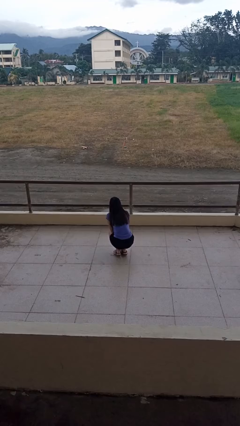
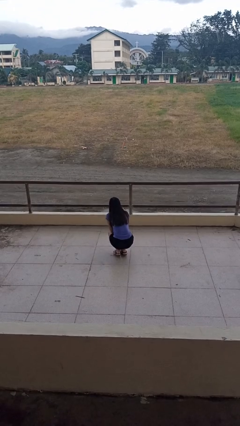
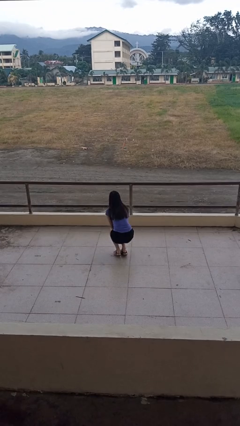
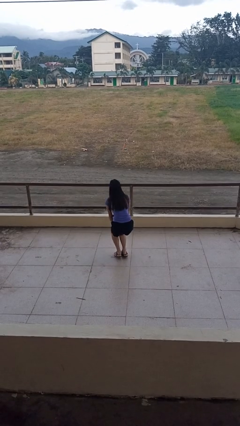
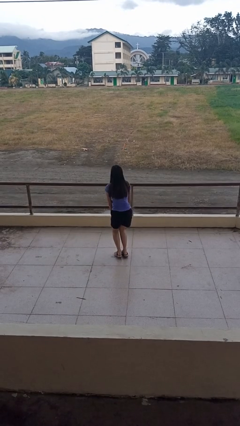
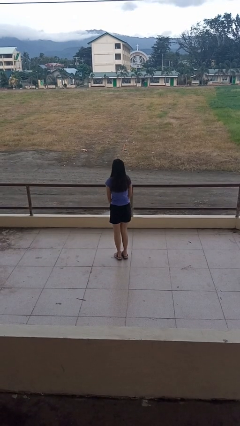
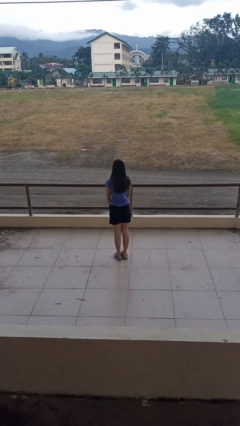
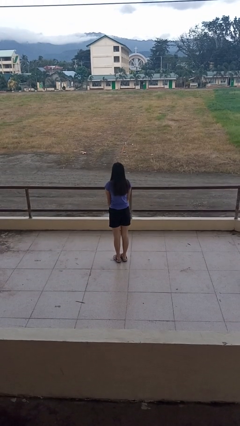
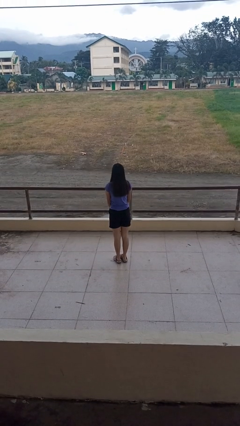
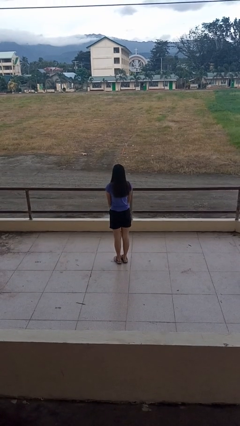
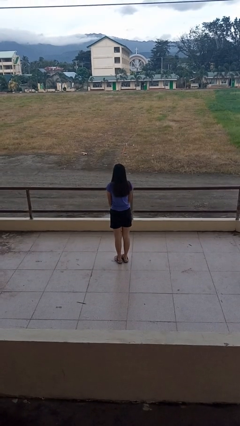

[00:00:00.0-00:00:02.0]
person stands up

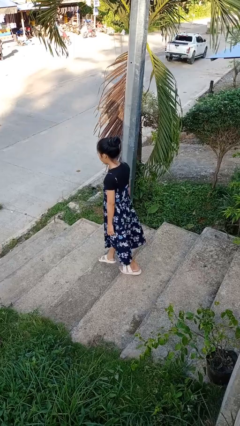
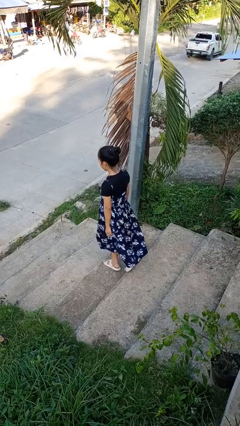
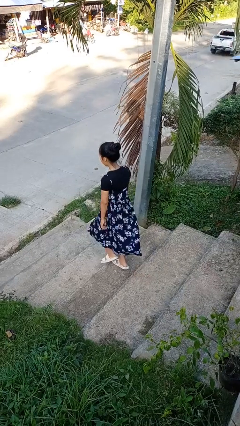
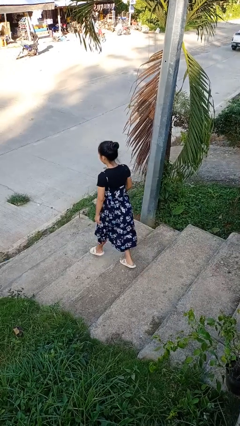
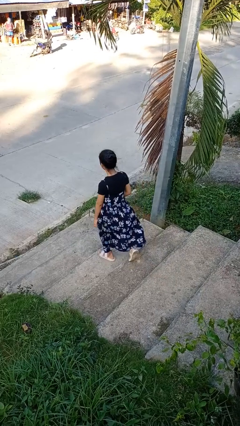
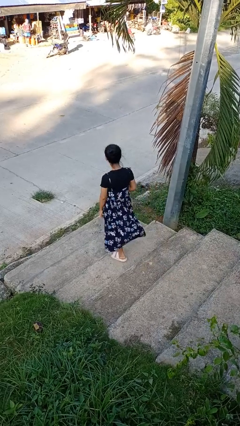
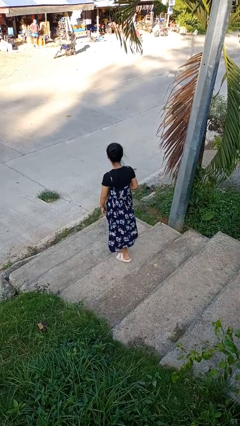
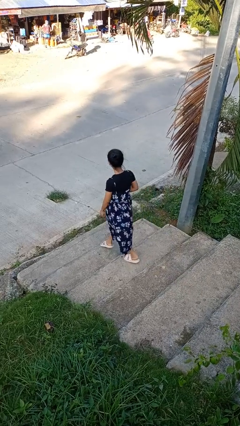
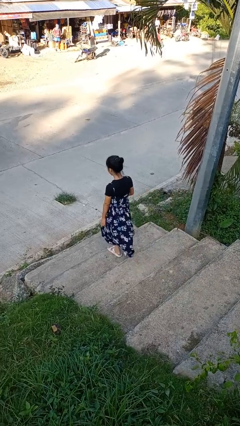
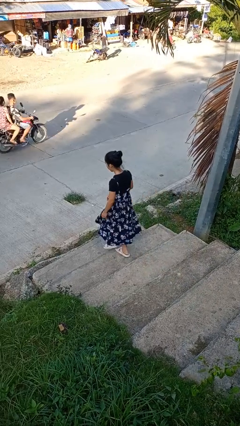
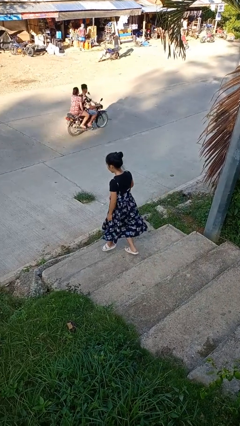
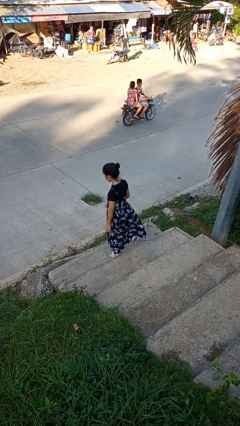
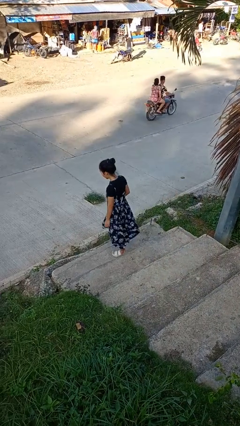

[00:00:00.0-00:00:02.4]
person climbs down stairs

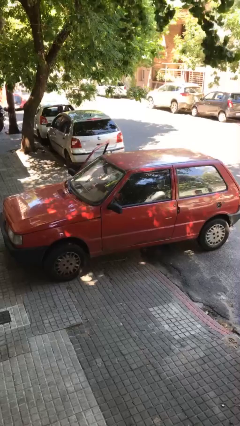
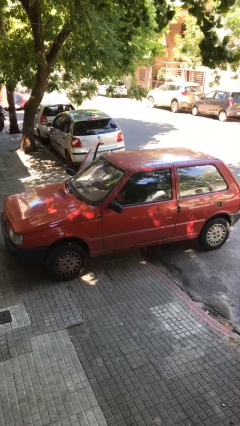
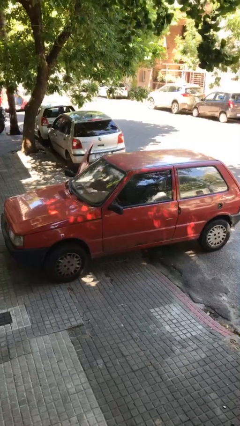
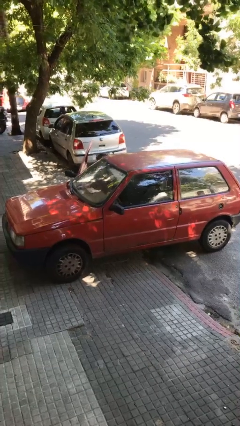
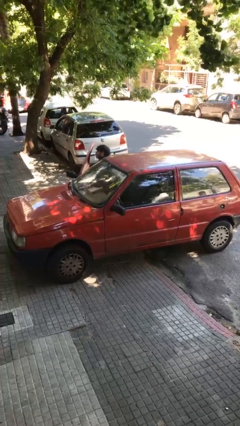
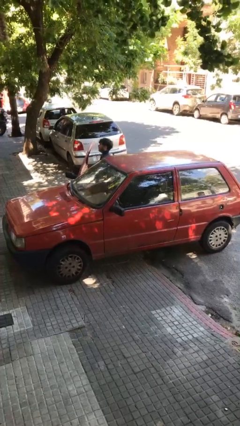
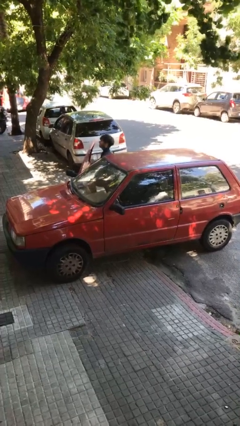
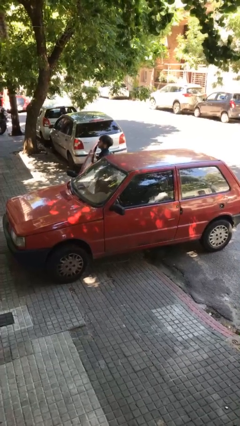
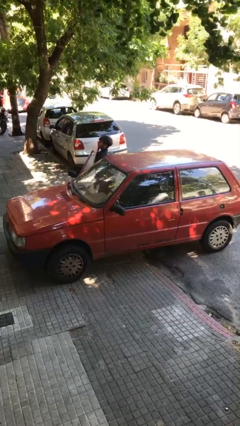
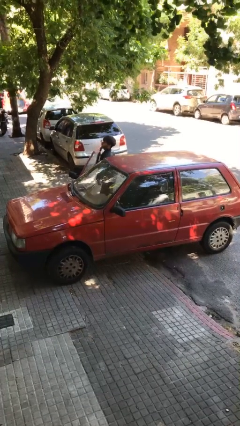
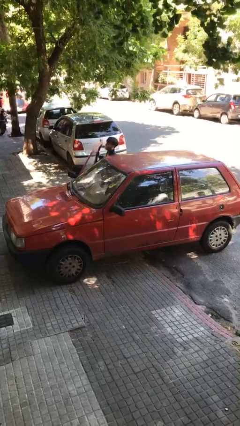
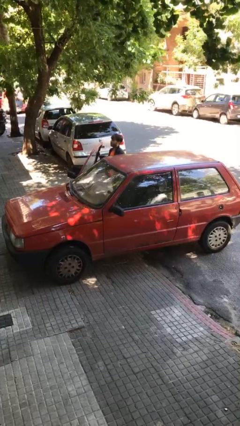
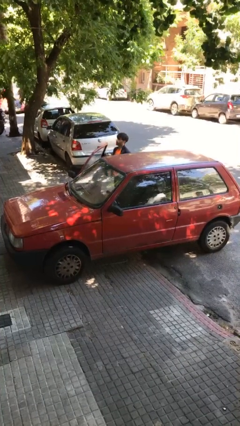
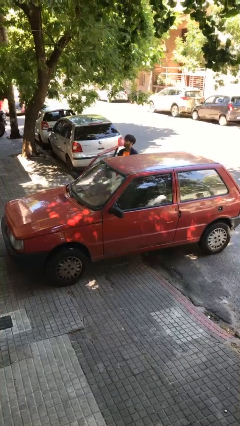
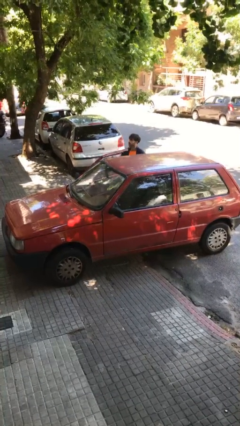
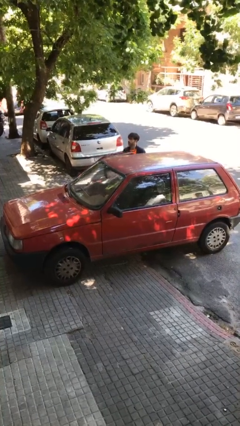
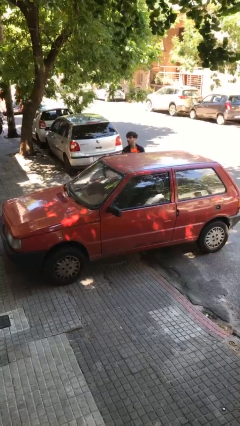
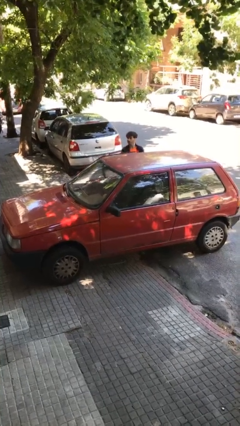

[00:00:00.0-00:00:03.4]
car drops off person

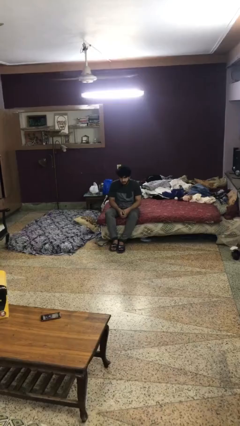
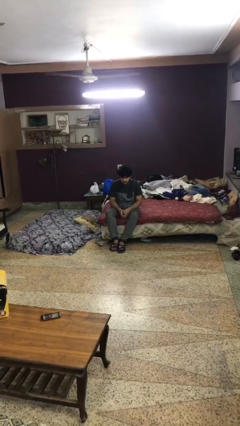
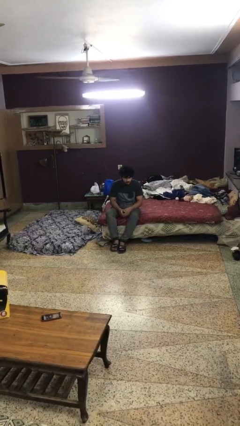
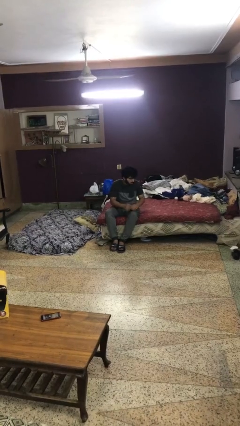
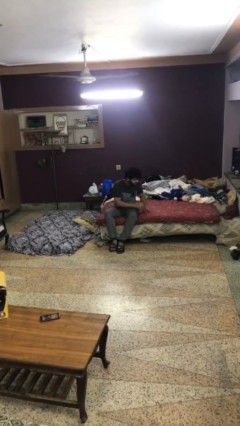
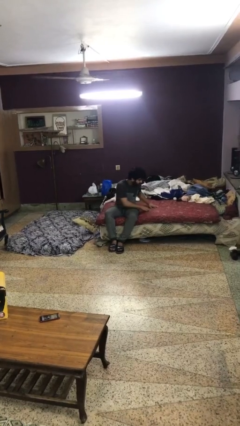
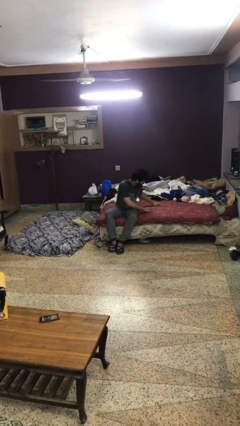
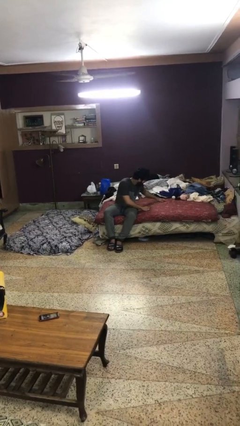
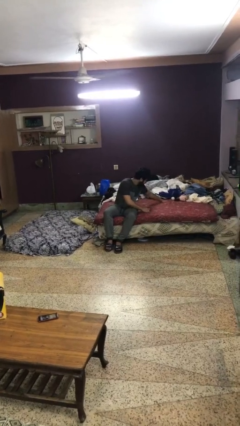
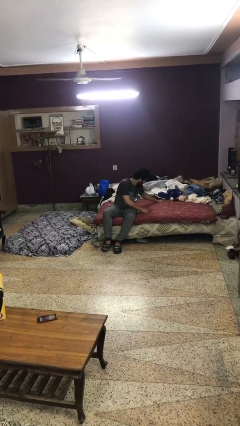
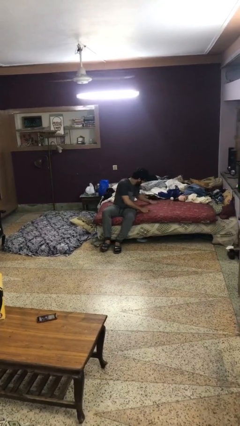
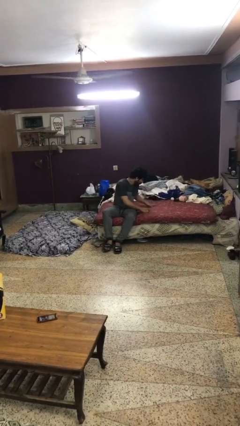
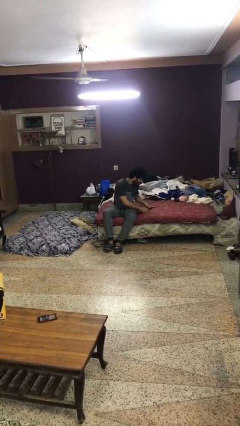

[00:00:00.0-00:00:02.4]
person searches under bed

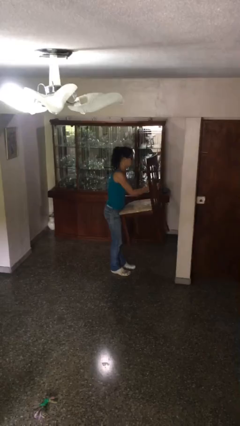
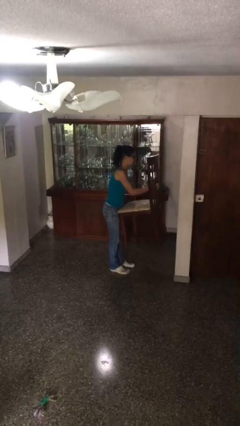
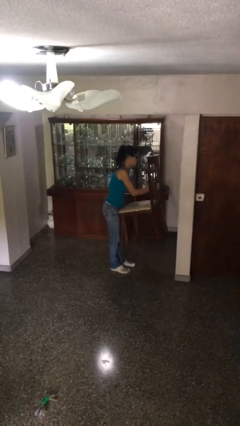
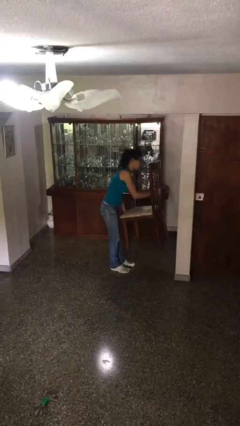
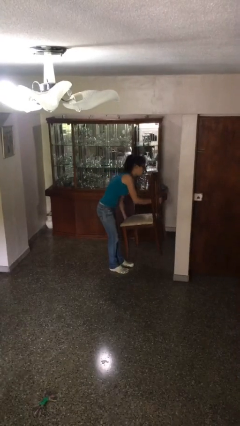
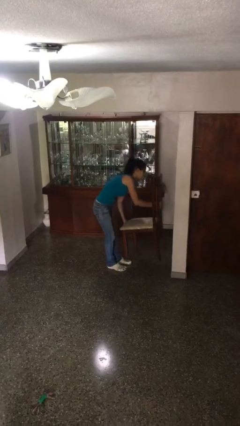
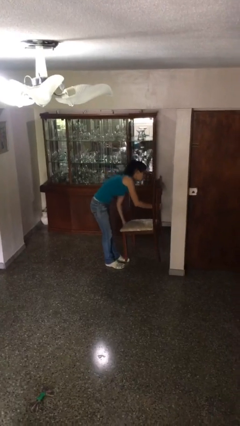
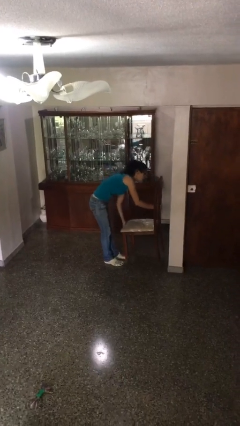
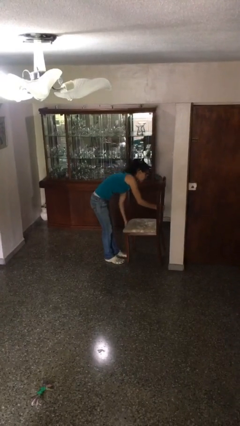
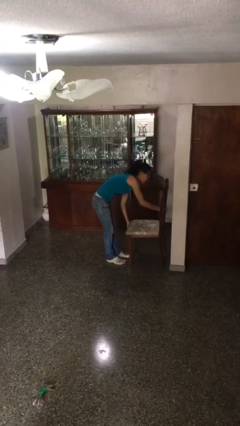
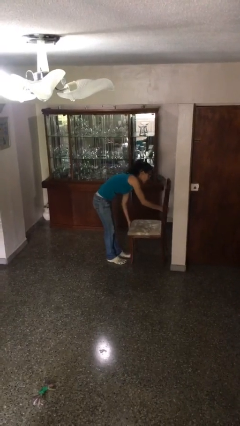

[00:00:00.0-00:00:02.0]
person puts down object on floor

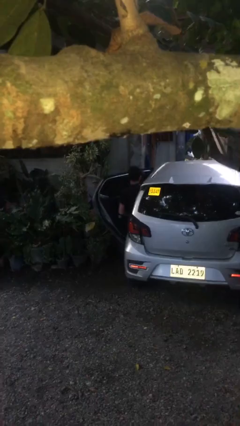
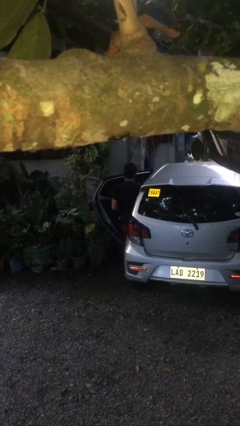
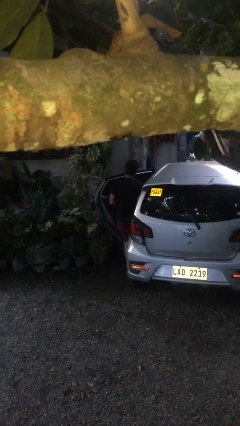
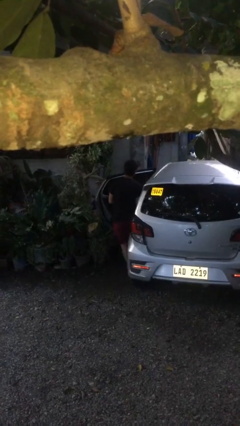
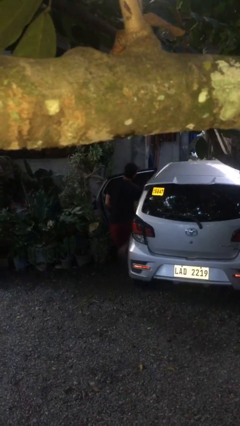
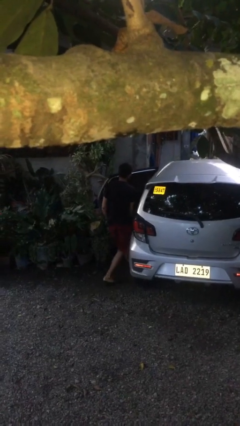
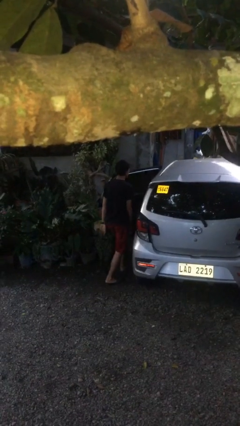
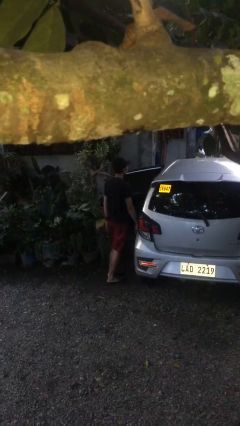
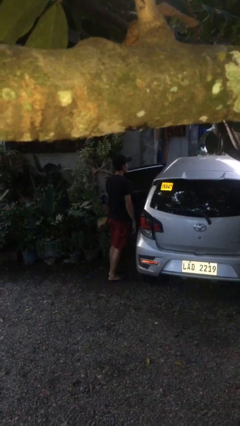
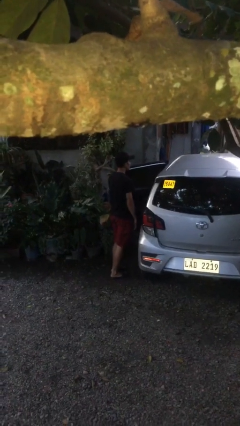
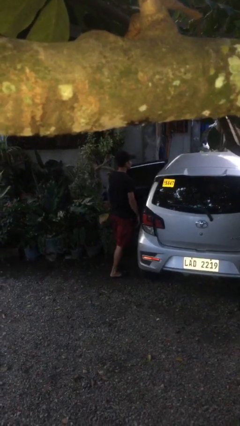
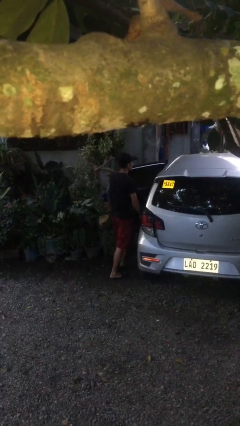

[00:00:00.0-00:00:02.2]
person exits car

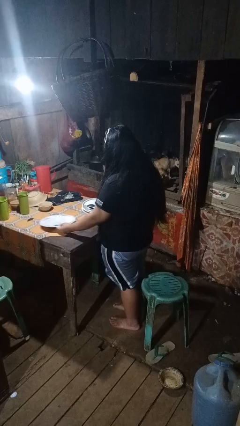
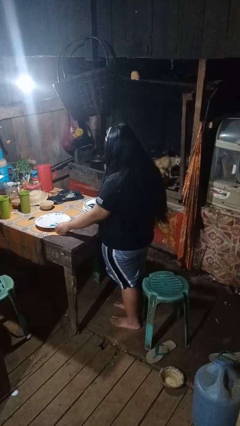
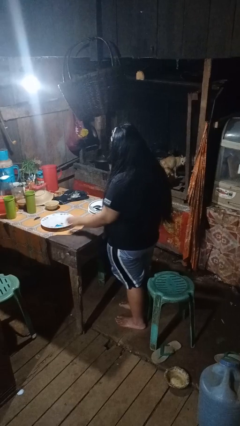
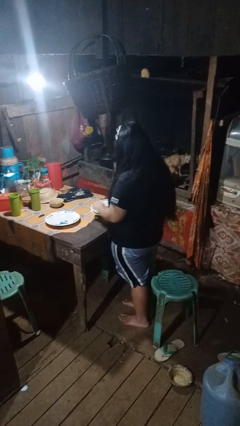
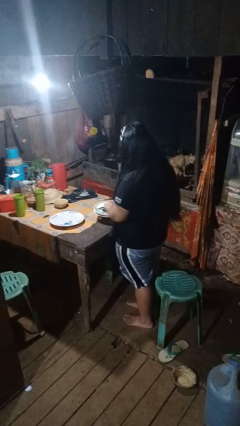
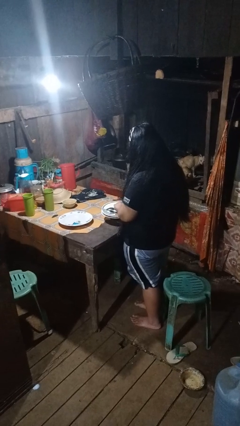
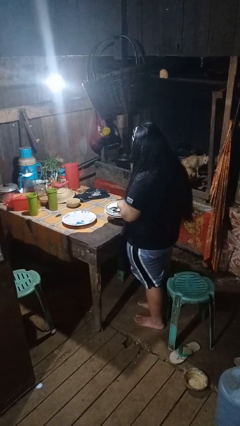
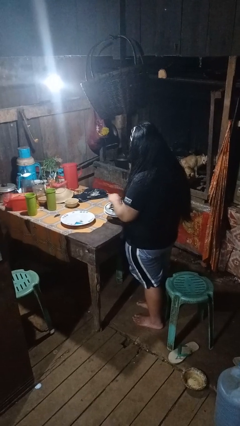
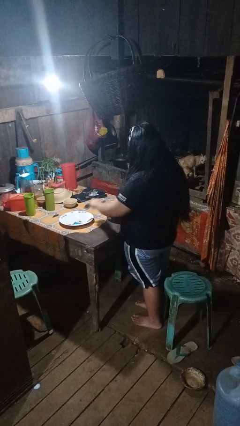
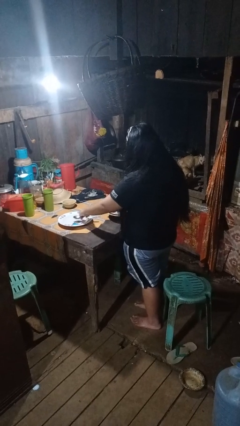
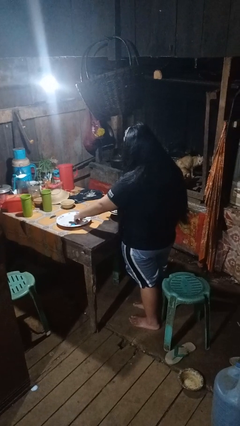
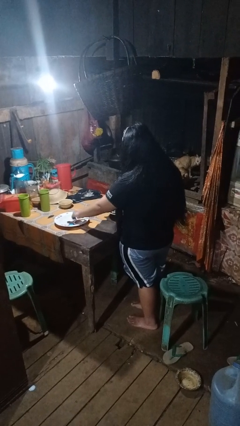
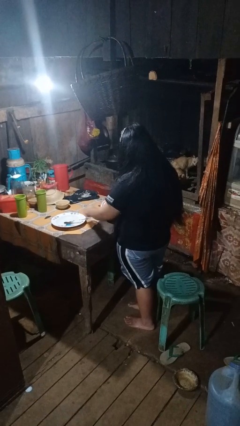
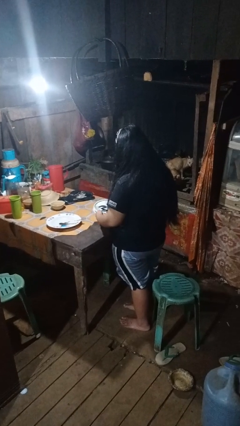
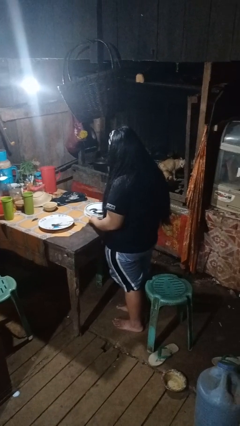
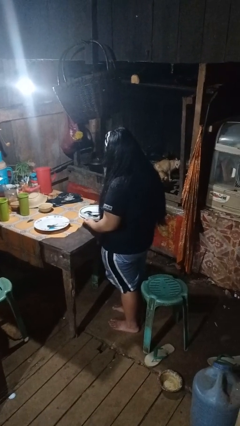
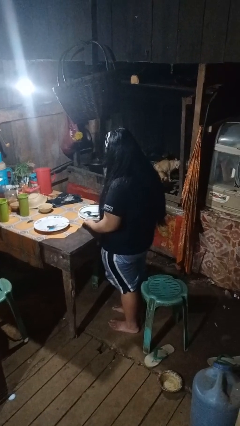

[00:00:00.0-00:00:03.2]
person sets table
